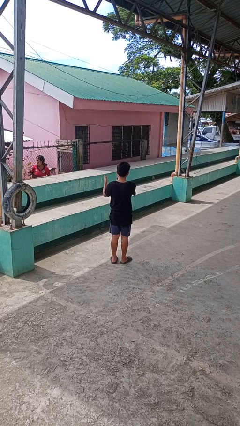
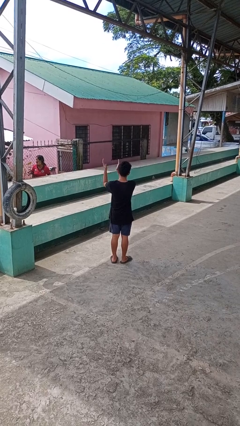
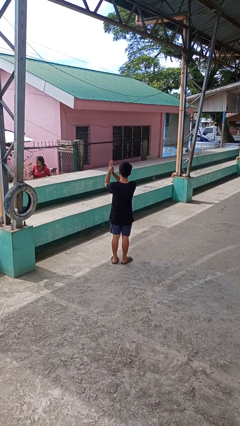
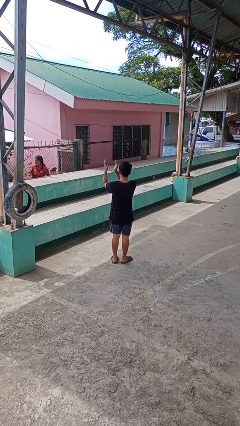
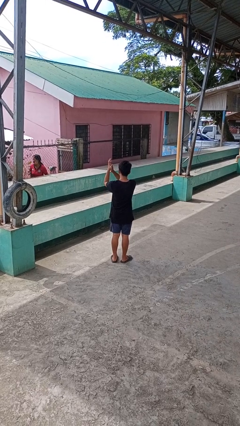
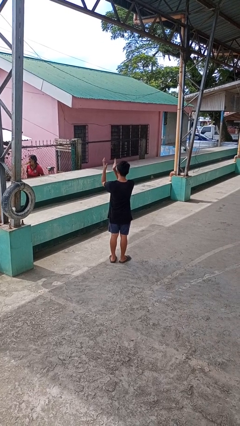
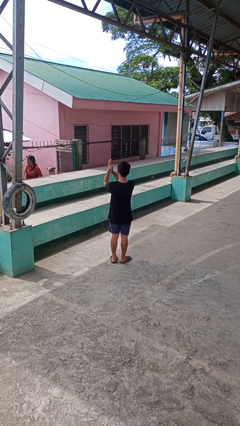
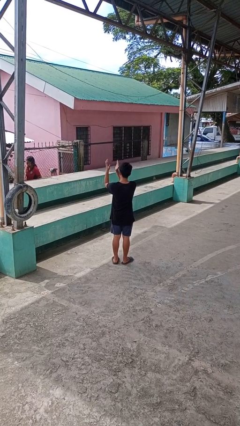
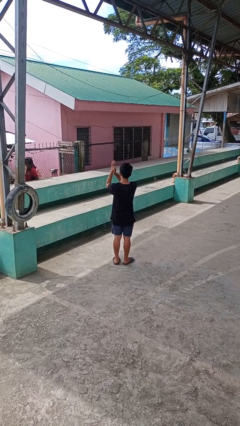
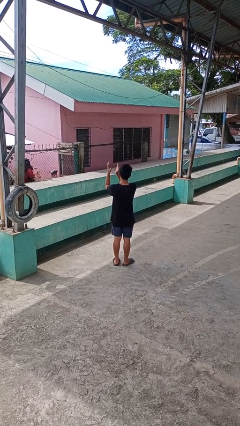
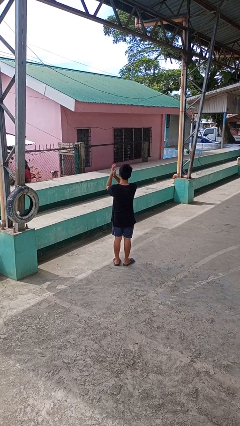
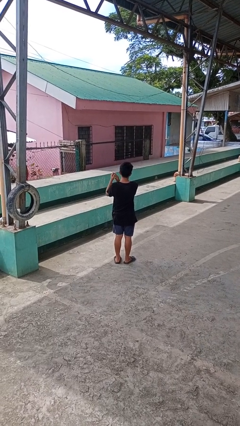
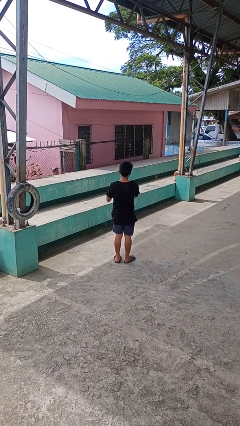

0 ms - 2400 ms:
person claps hands

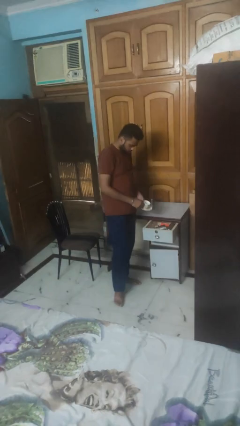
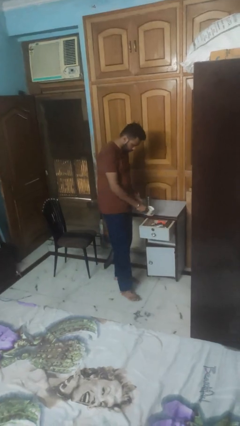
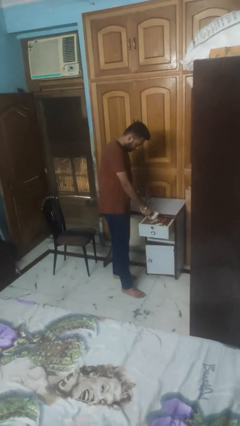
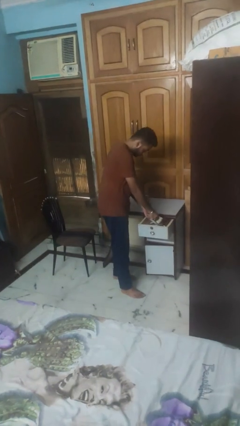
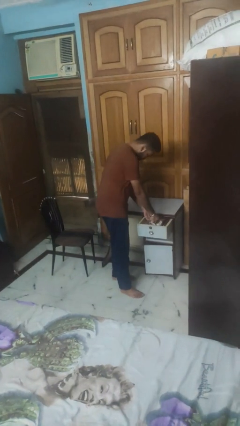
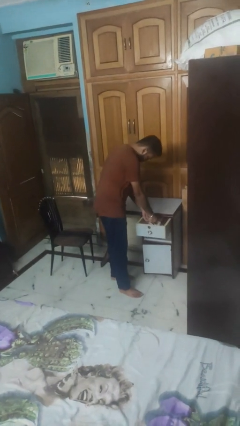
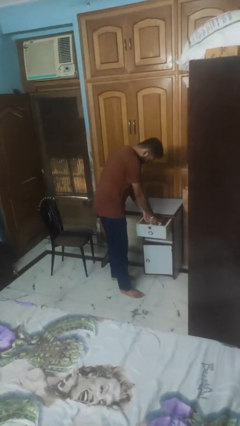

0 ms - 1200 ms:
person puts object into kitchen drawer

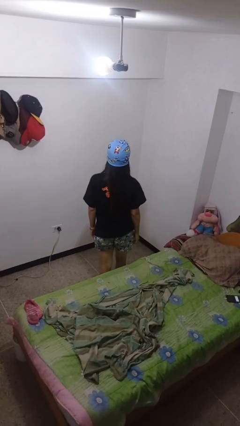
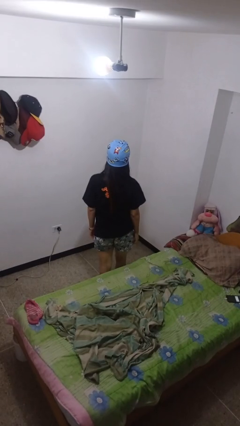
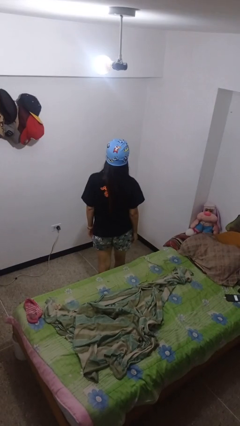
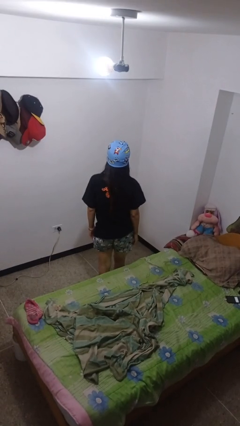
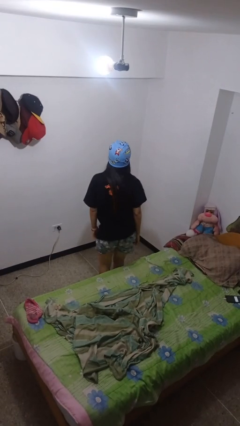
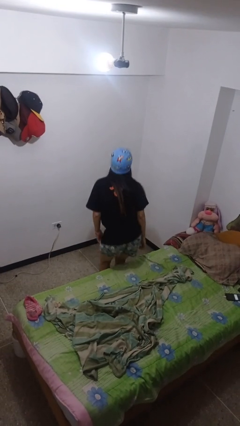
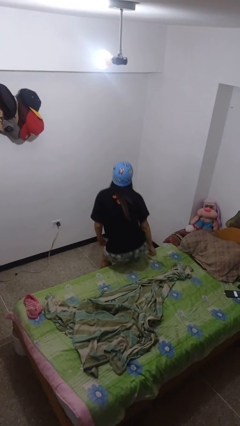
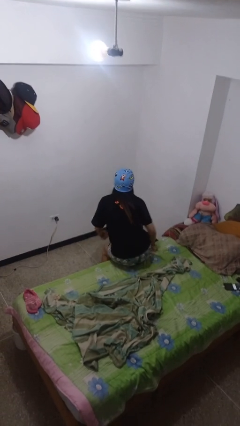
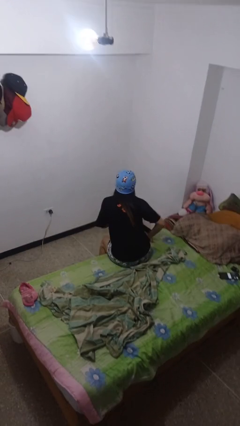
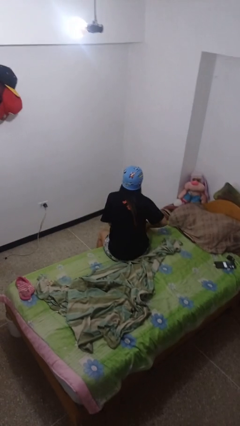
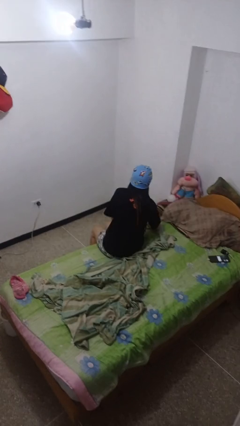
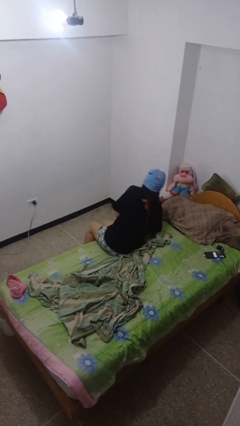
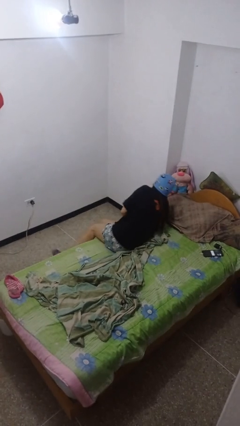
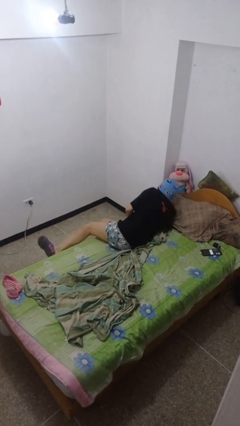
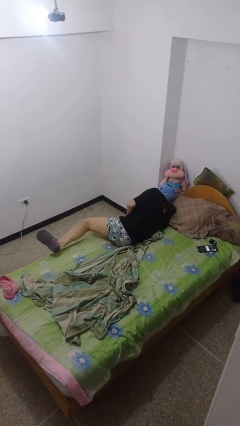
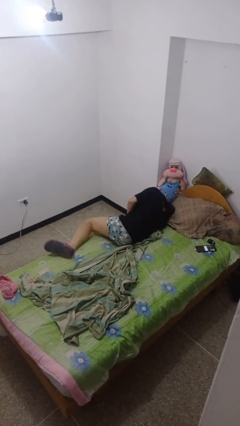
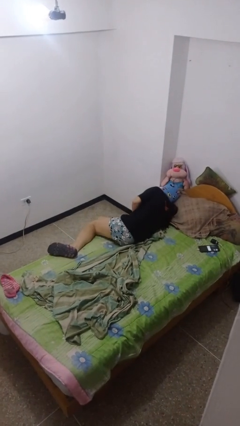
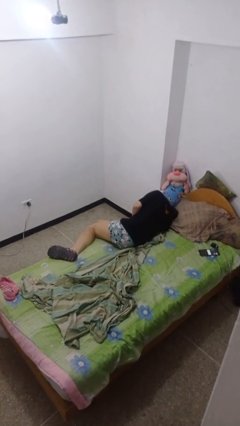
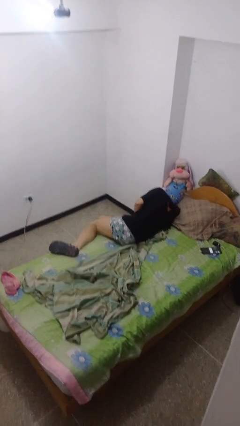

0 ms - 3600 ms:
person lies down on bed

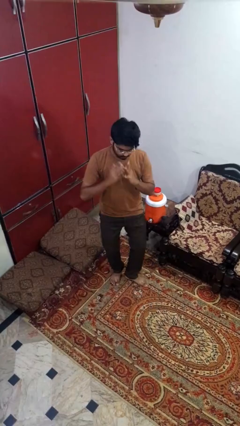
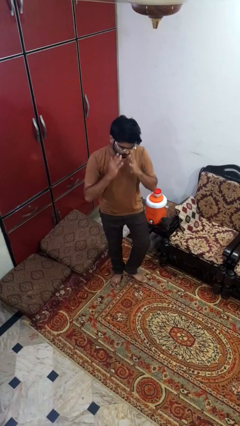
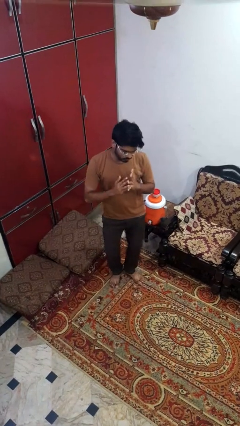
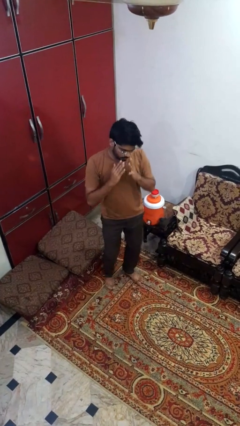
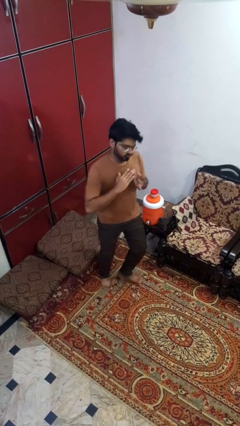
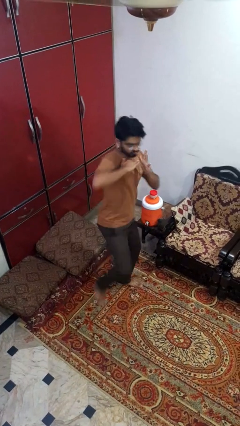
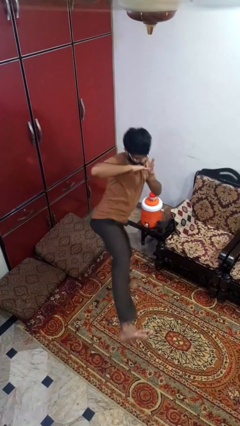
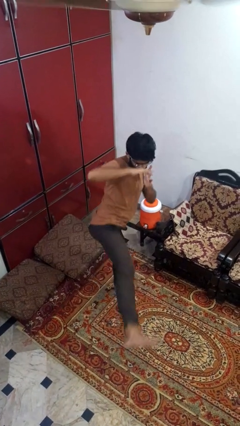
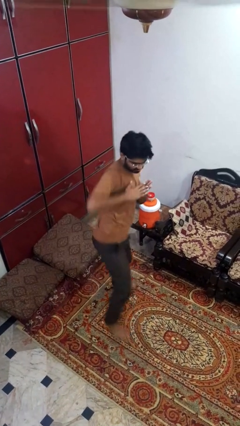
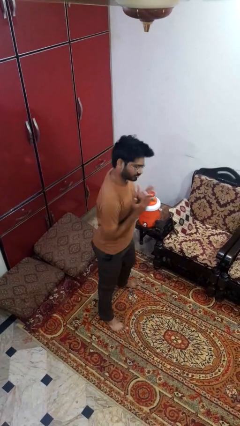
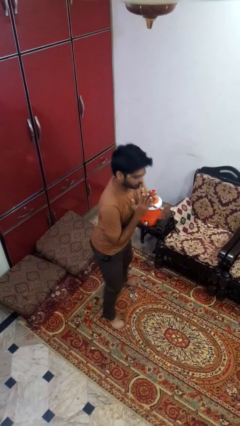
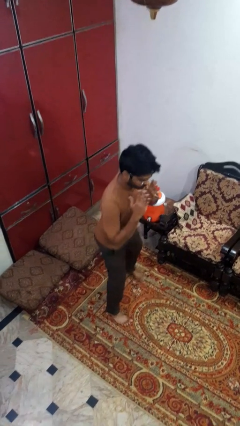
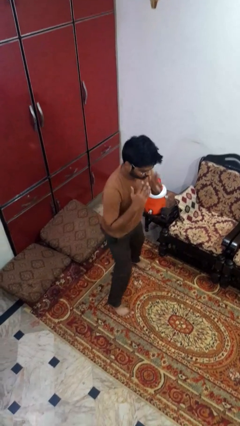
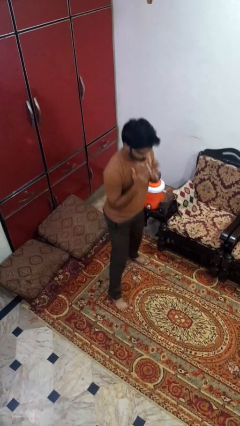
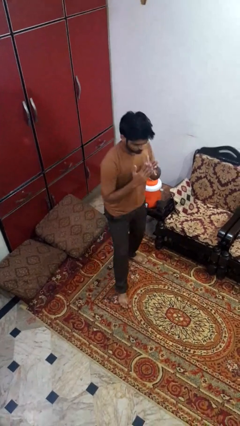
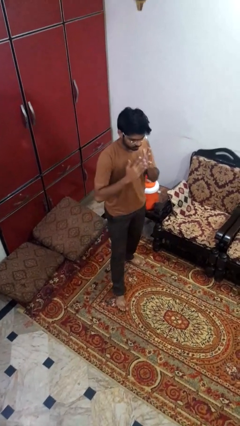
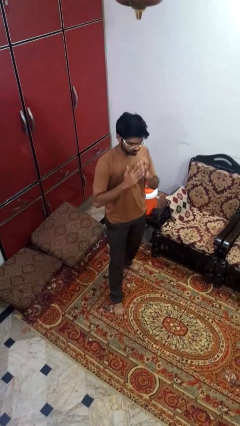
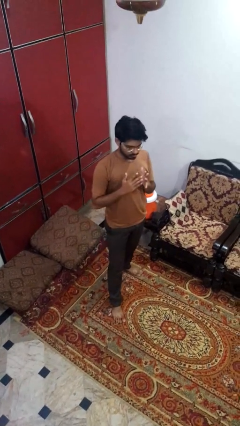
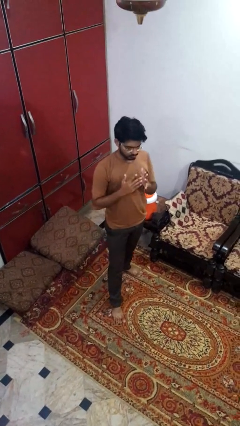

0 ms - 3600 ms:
person karate kicks

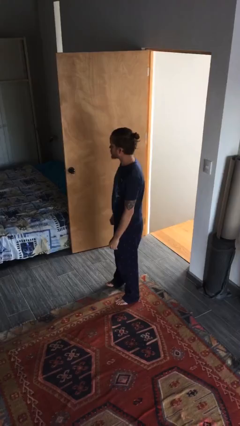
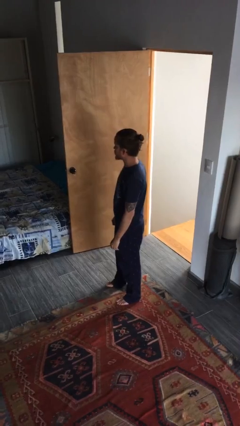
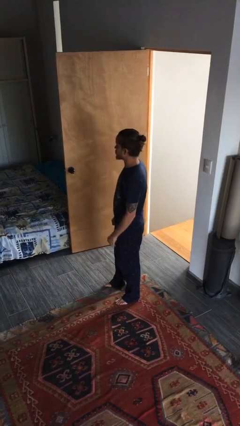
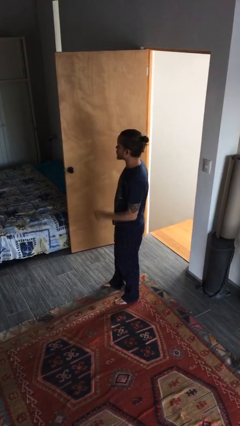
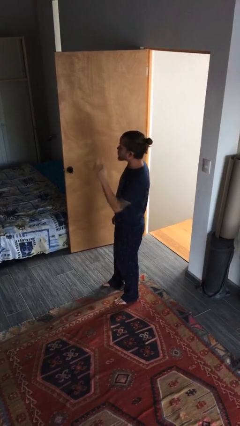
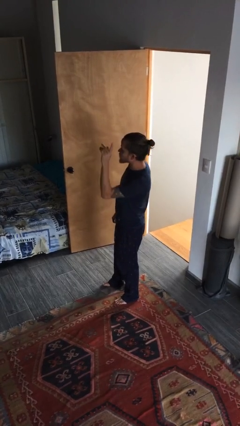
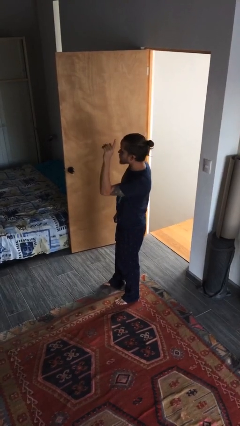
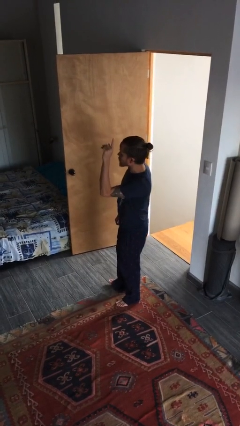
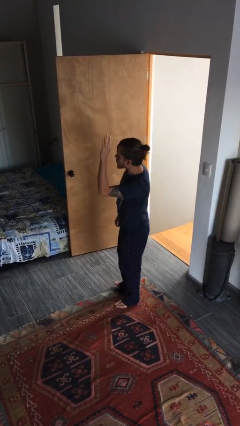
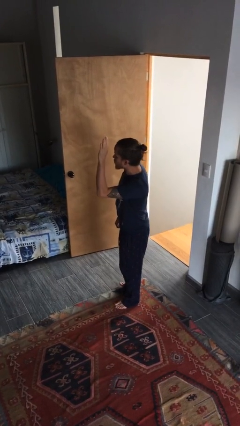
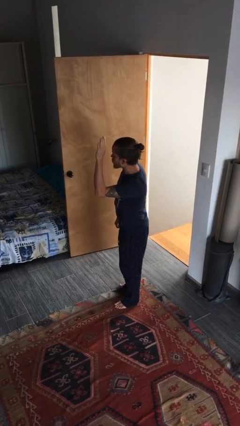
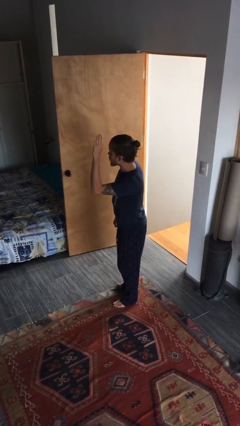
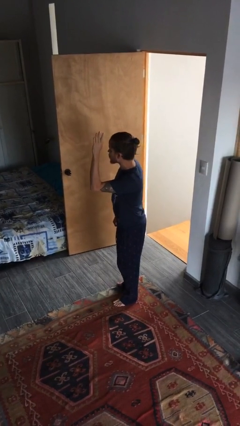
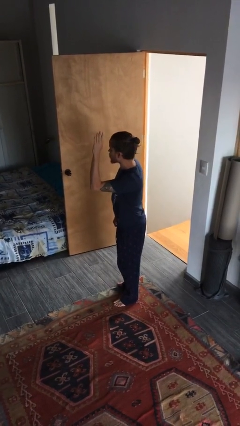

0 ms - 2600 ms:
person gestures raise hand

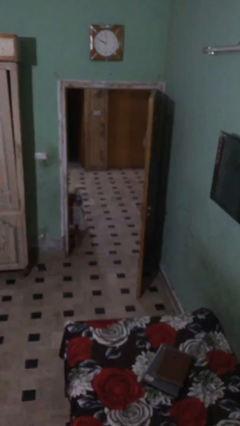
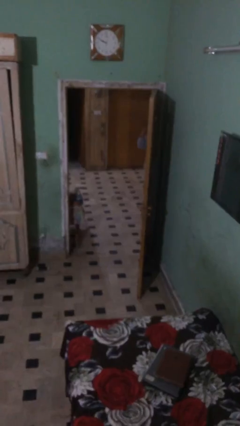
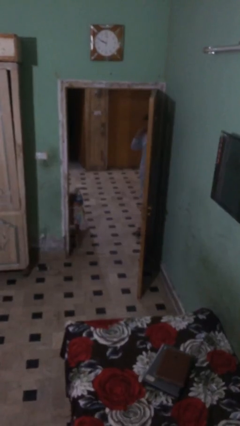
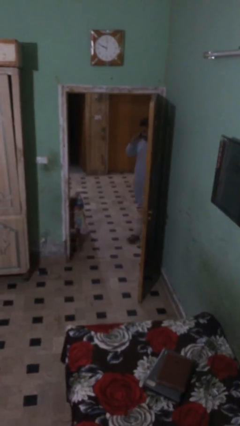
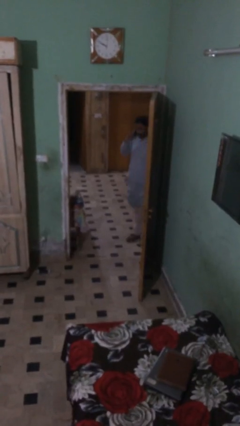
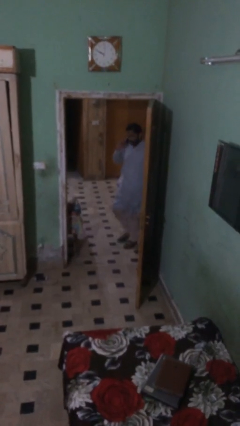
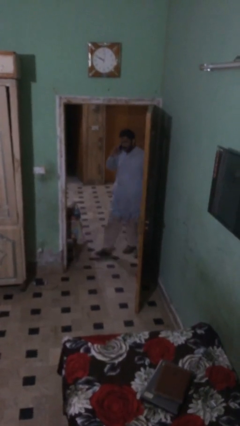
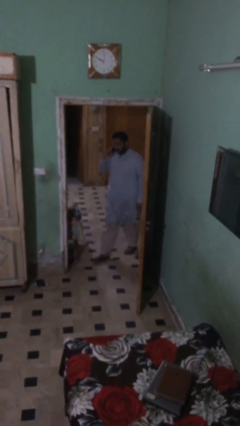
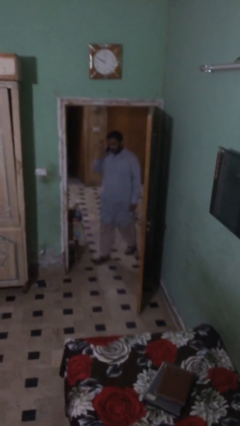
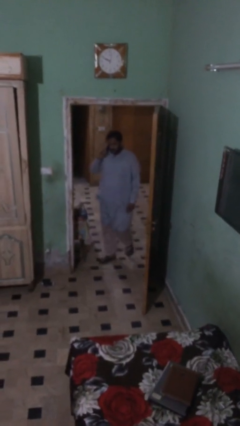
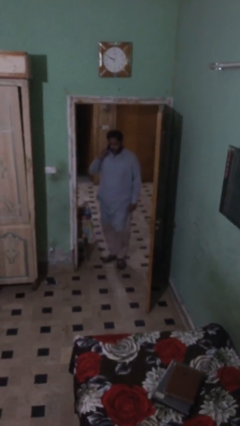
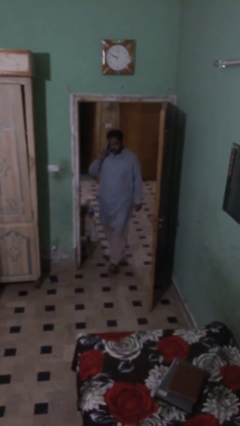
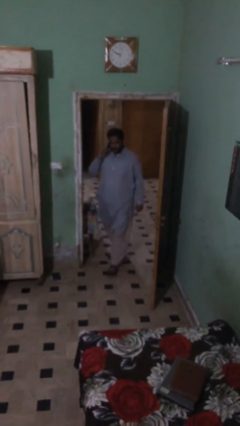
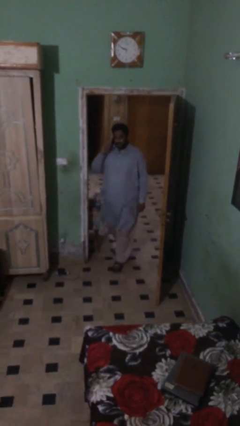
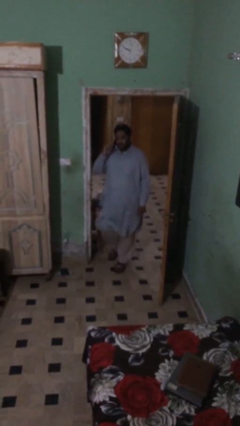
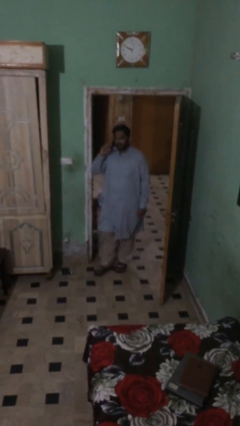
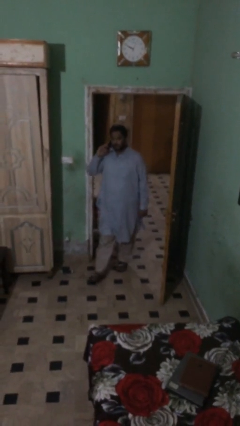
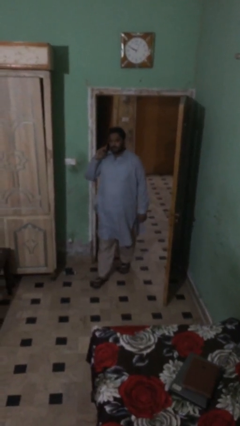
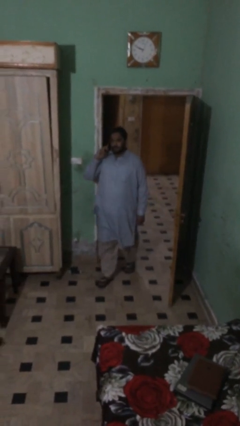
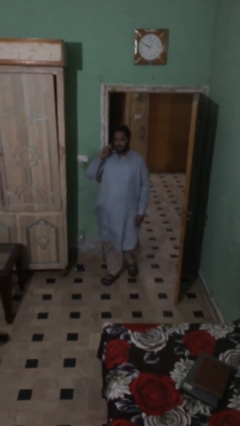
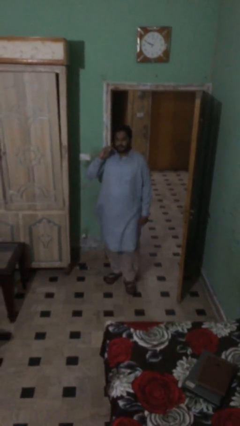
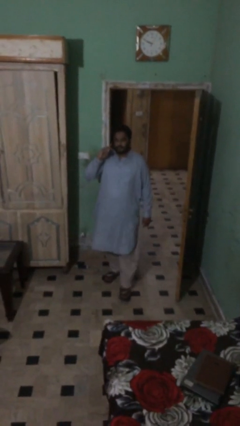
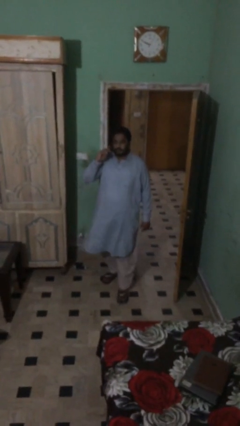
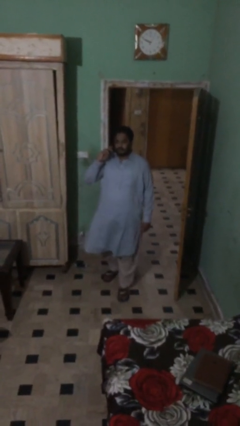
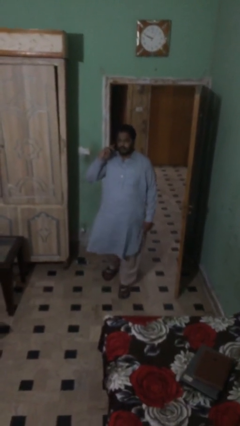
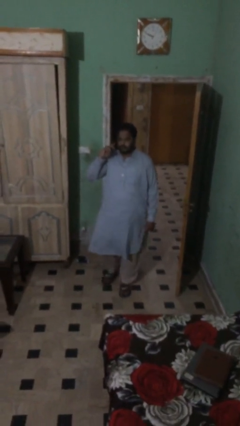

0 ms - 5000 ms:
person enters scene through structure
